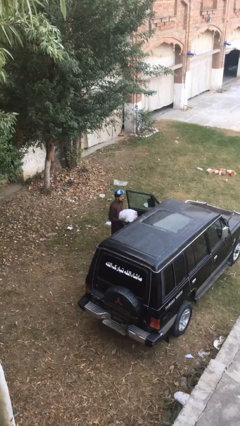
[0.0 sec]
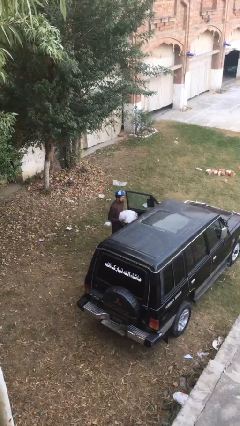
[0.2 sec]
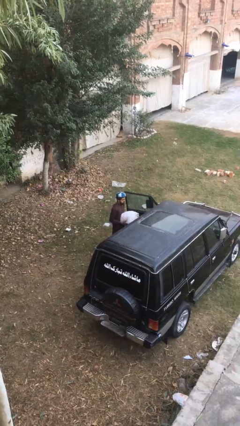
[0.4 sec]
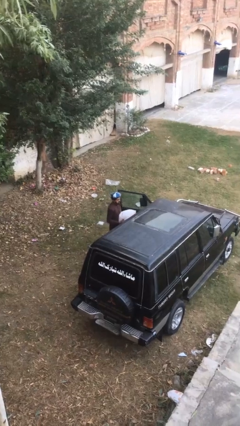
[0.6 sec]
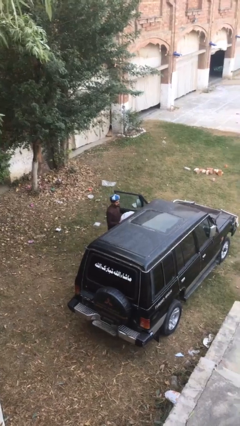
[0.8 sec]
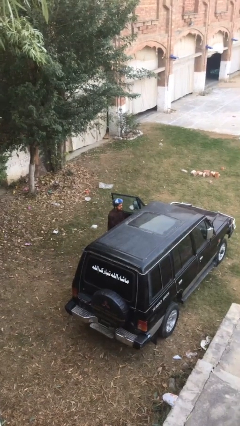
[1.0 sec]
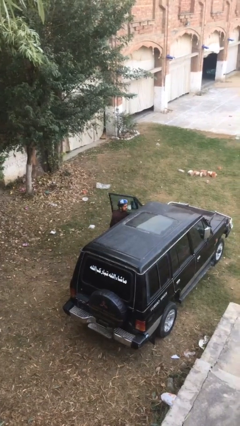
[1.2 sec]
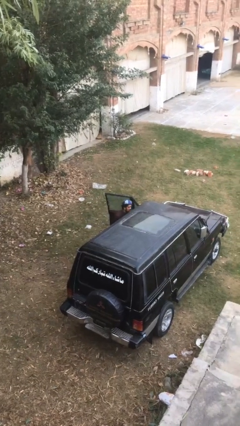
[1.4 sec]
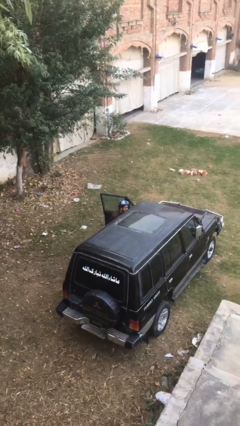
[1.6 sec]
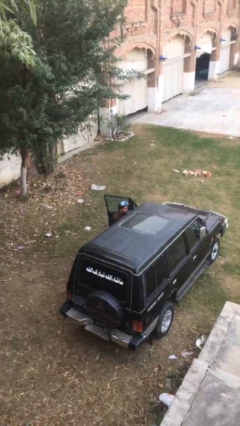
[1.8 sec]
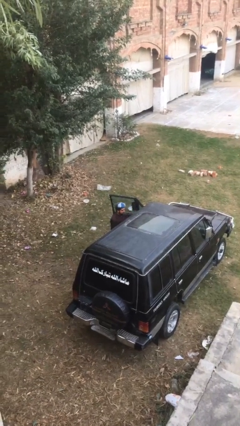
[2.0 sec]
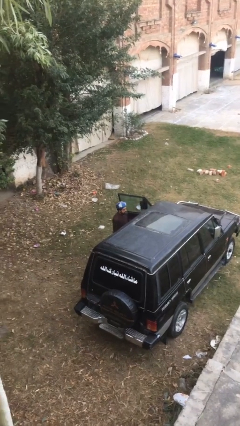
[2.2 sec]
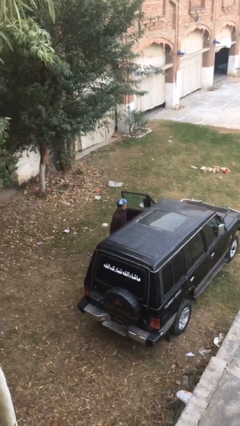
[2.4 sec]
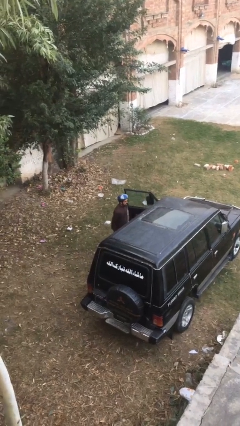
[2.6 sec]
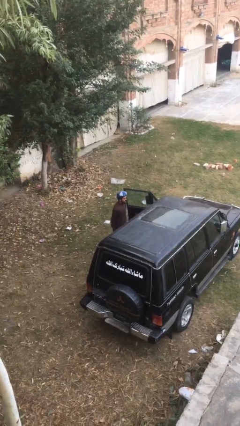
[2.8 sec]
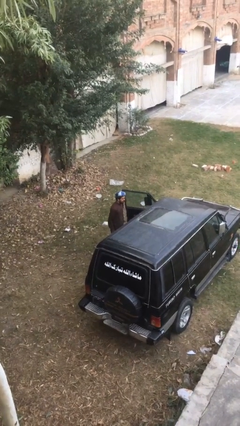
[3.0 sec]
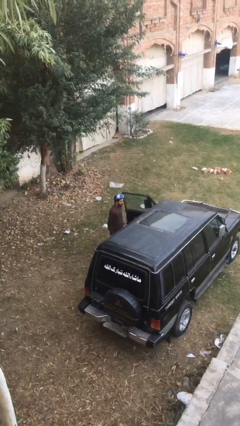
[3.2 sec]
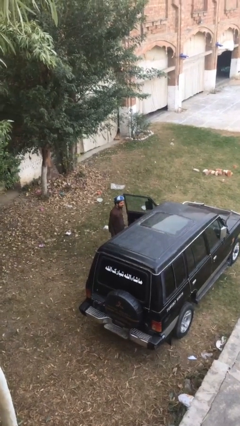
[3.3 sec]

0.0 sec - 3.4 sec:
person loads car

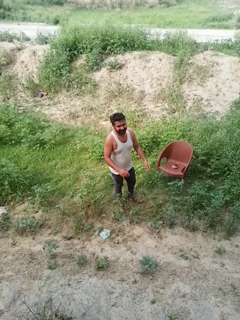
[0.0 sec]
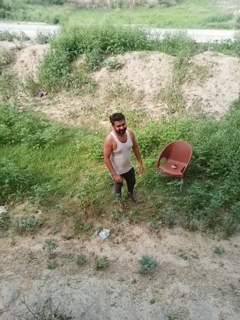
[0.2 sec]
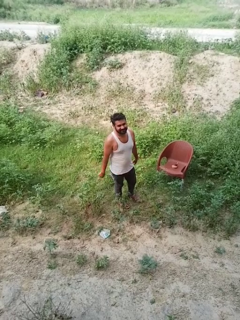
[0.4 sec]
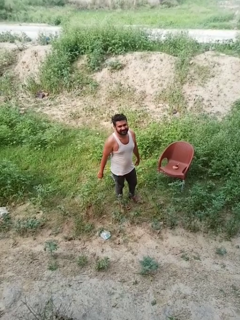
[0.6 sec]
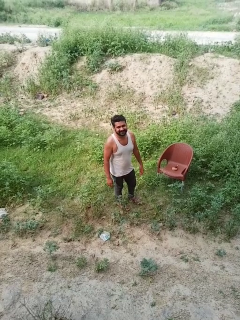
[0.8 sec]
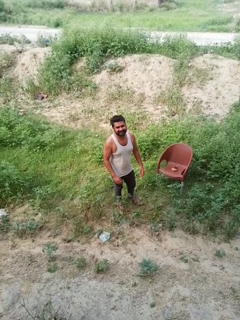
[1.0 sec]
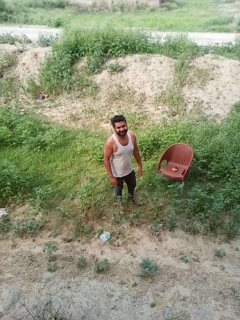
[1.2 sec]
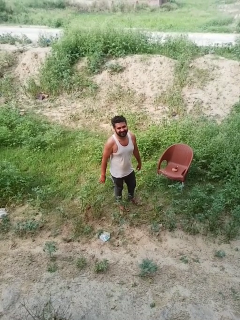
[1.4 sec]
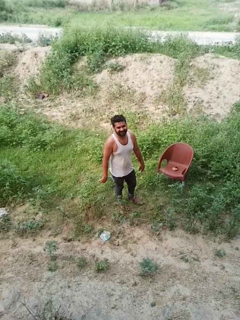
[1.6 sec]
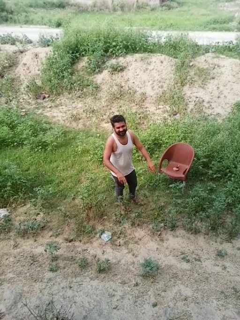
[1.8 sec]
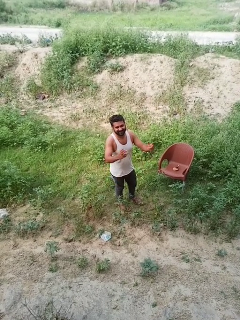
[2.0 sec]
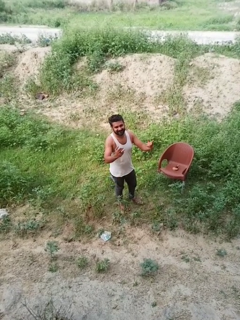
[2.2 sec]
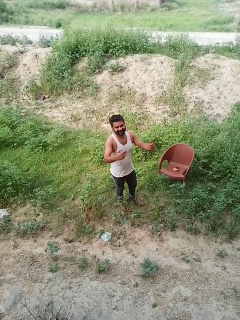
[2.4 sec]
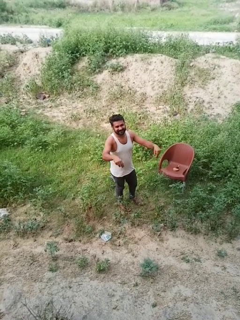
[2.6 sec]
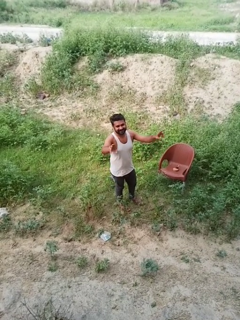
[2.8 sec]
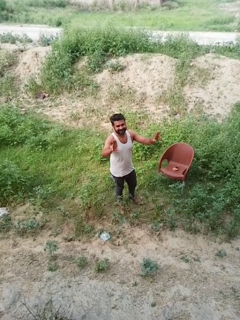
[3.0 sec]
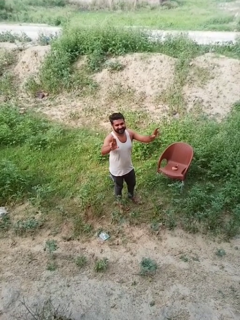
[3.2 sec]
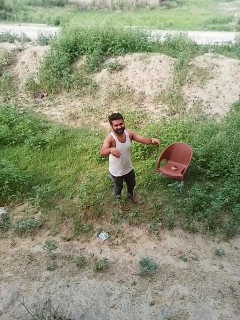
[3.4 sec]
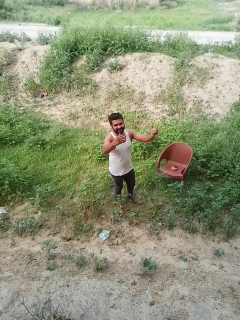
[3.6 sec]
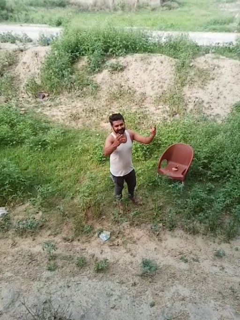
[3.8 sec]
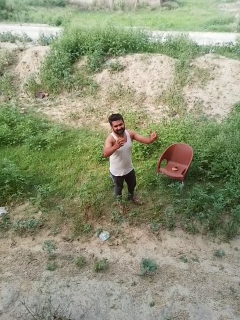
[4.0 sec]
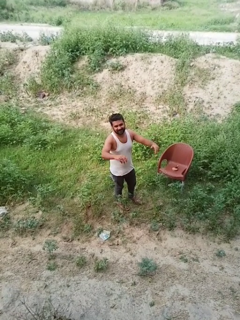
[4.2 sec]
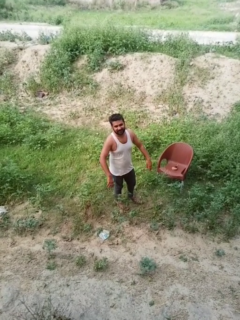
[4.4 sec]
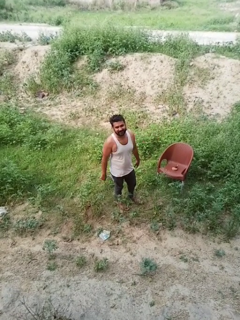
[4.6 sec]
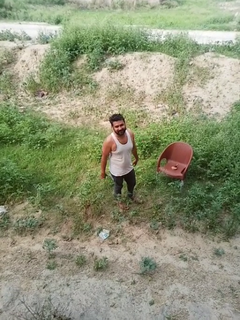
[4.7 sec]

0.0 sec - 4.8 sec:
person dances in place

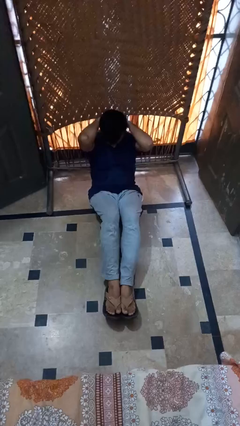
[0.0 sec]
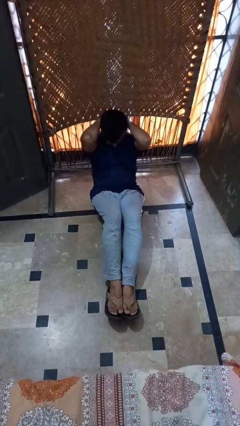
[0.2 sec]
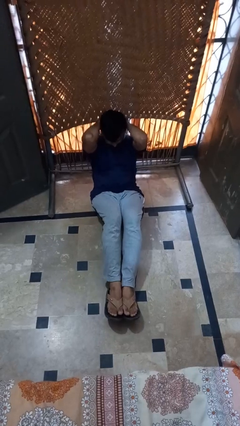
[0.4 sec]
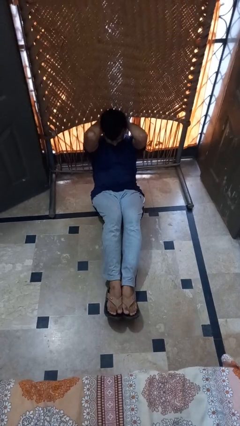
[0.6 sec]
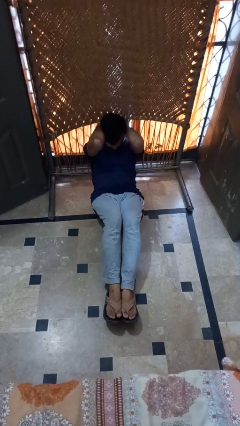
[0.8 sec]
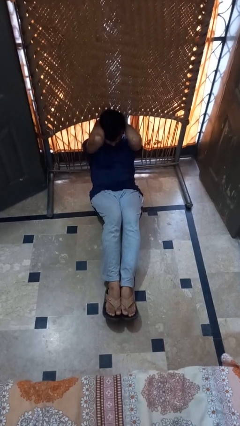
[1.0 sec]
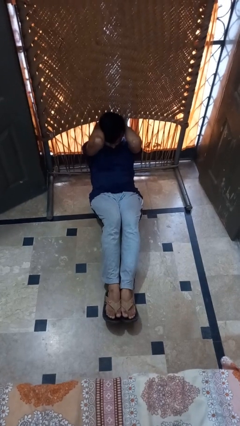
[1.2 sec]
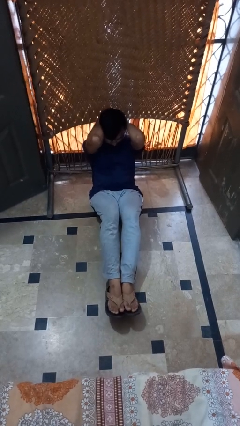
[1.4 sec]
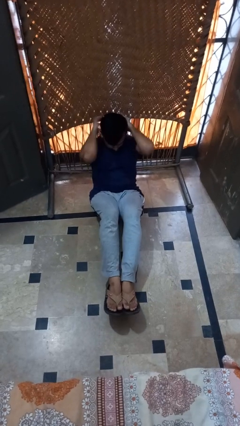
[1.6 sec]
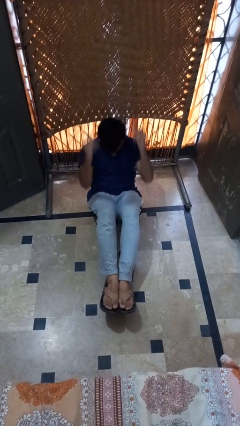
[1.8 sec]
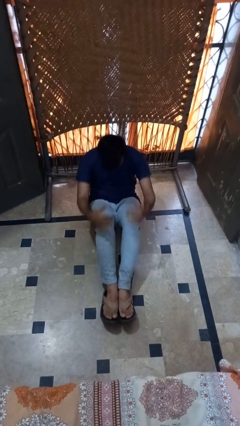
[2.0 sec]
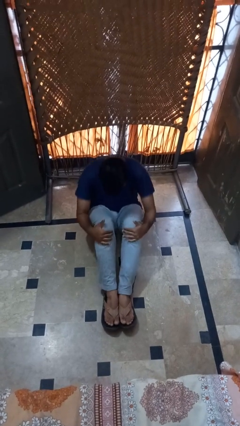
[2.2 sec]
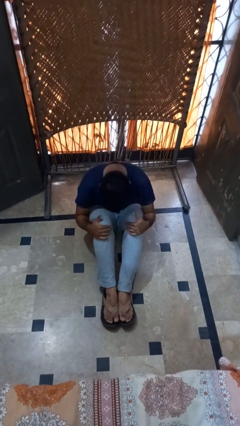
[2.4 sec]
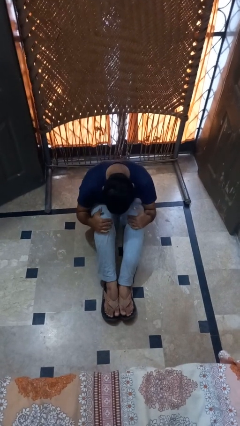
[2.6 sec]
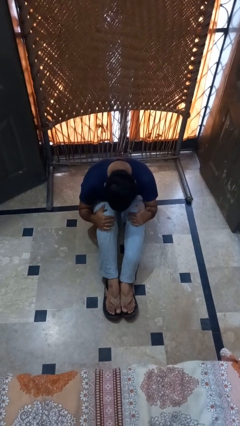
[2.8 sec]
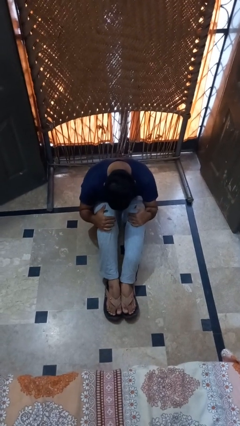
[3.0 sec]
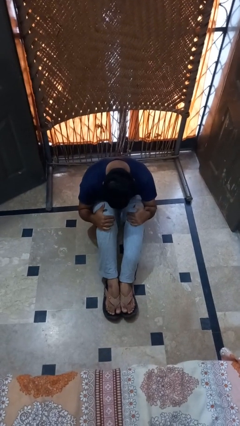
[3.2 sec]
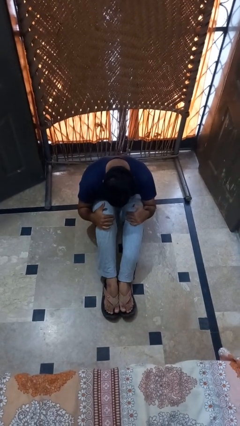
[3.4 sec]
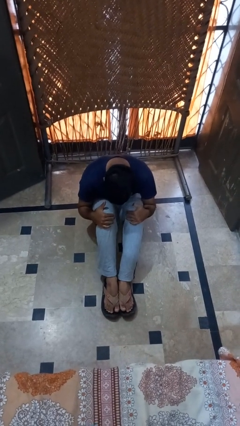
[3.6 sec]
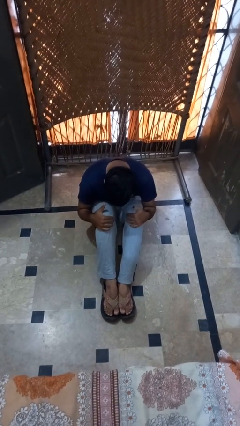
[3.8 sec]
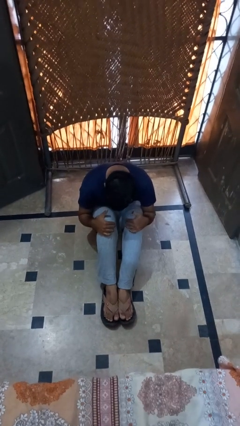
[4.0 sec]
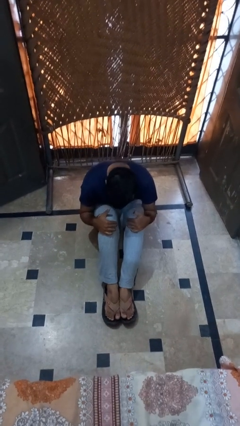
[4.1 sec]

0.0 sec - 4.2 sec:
person exercises with situp

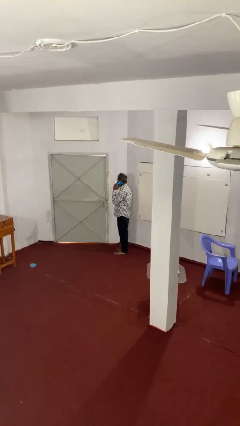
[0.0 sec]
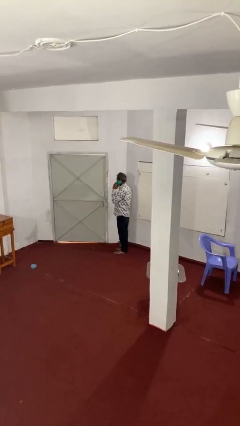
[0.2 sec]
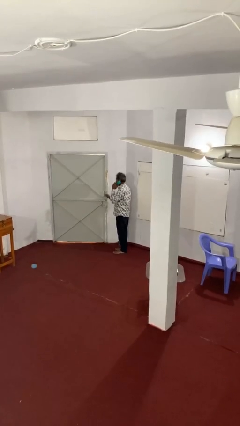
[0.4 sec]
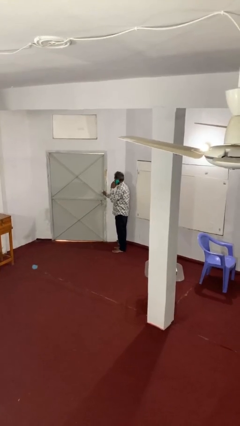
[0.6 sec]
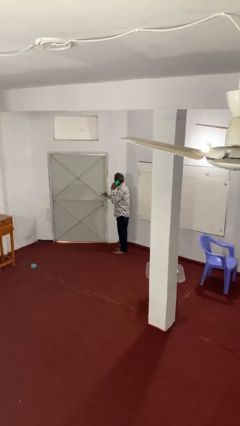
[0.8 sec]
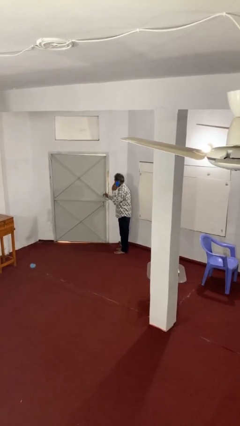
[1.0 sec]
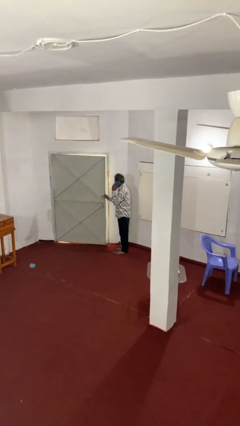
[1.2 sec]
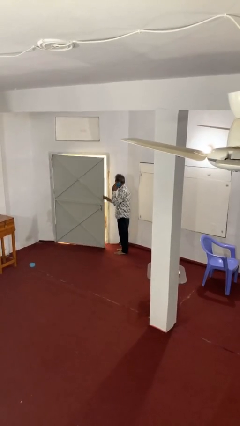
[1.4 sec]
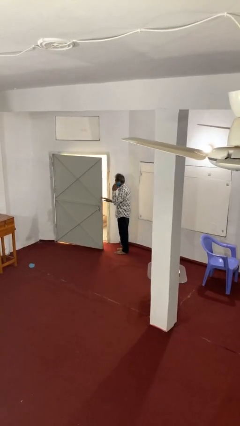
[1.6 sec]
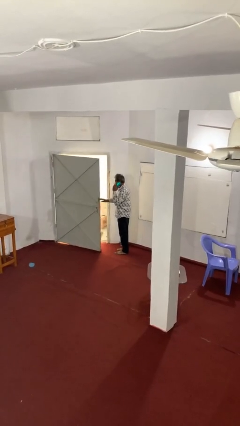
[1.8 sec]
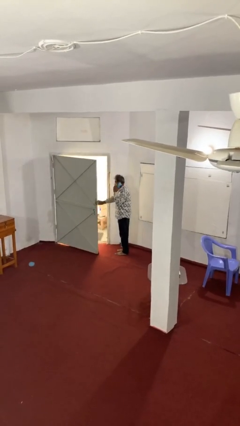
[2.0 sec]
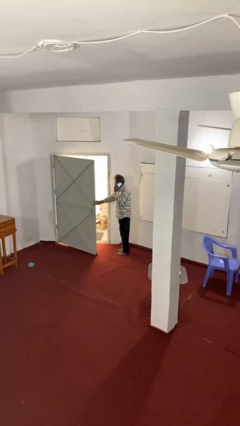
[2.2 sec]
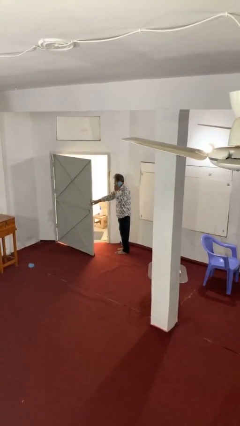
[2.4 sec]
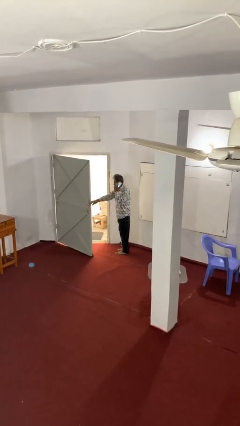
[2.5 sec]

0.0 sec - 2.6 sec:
person opens facility door

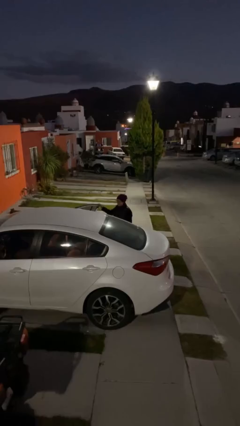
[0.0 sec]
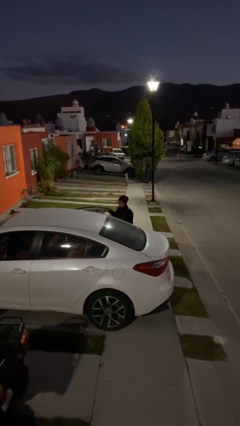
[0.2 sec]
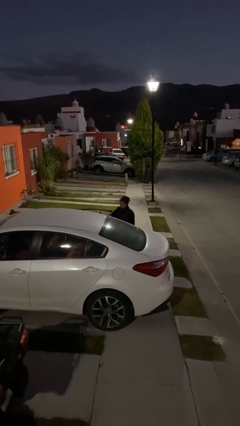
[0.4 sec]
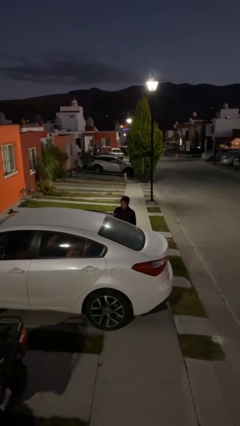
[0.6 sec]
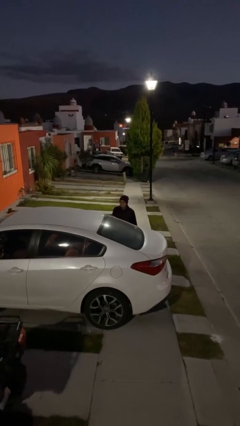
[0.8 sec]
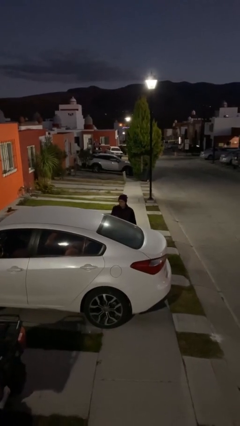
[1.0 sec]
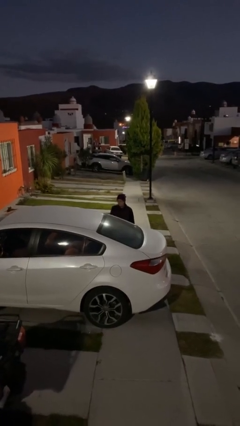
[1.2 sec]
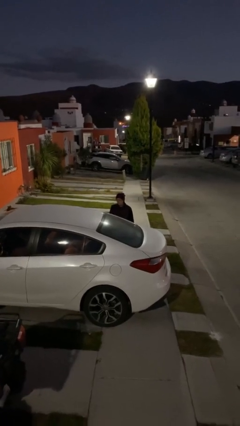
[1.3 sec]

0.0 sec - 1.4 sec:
person closes car door

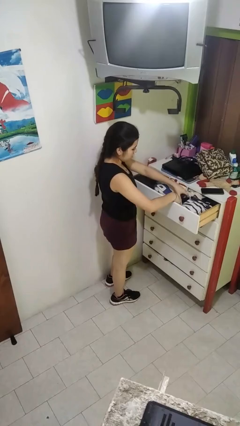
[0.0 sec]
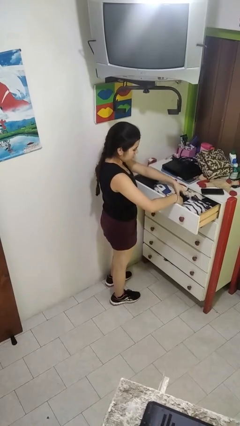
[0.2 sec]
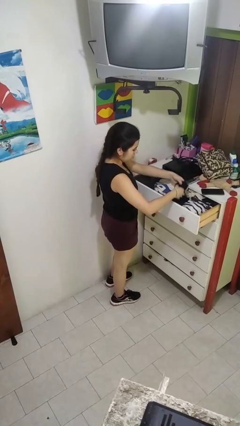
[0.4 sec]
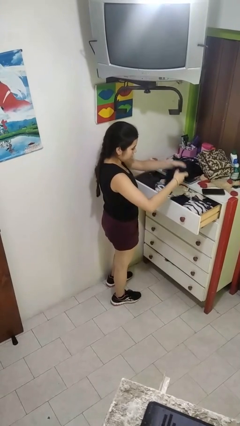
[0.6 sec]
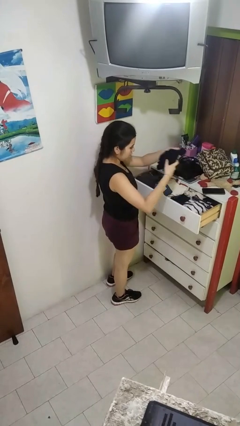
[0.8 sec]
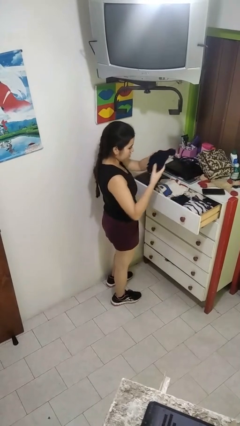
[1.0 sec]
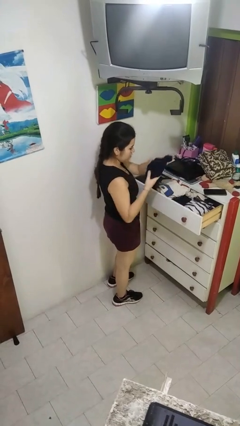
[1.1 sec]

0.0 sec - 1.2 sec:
person takes clothes from dresser

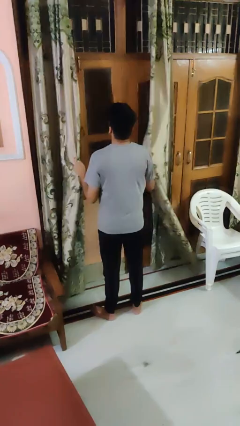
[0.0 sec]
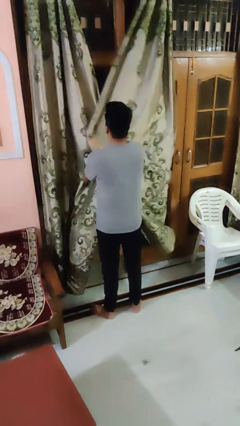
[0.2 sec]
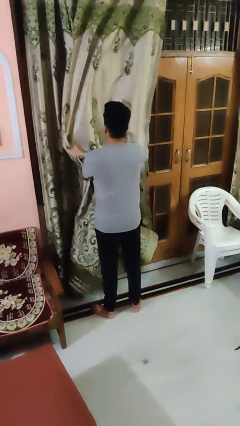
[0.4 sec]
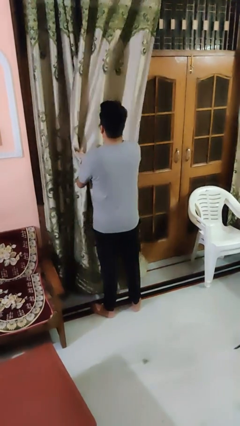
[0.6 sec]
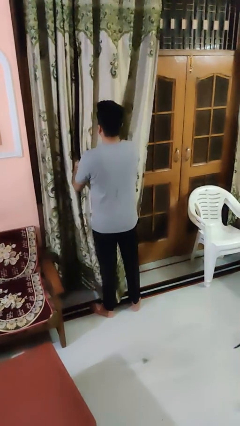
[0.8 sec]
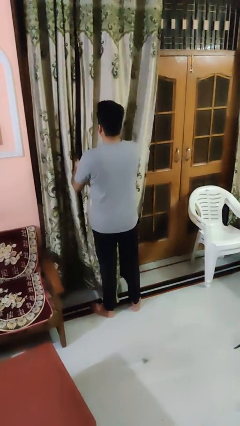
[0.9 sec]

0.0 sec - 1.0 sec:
person closes curtains
